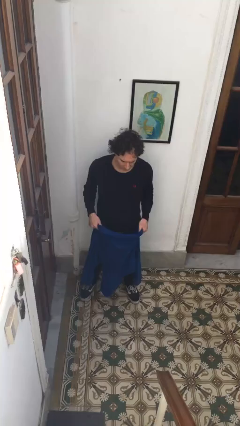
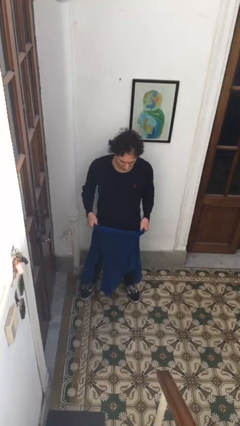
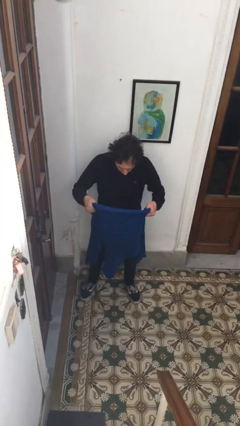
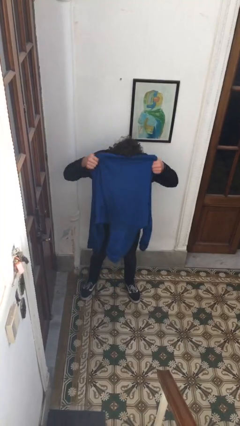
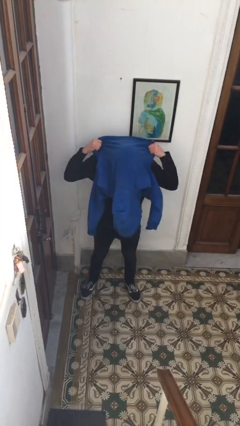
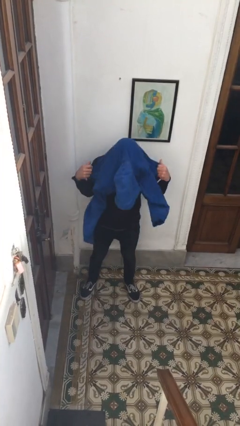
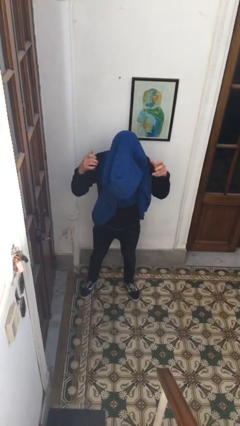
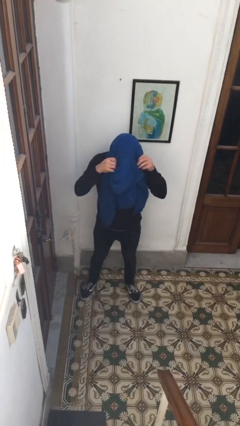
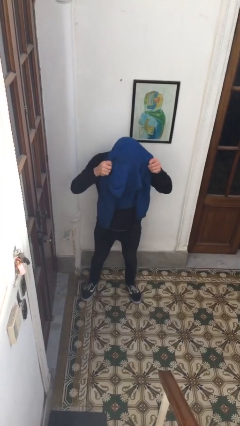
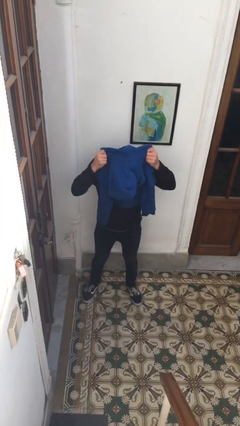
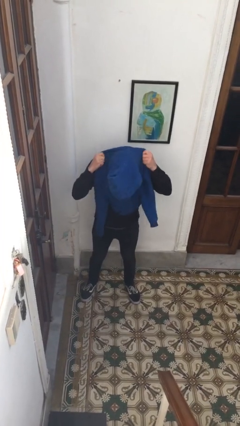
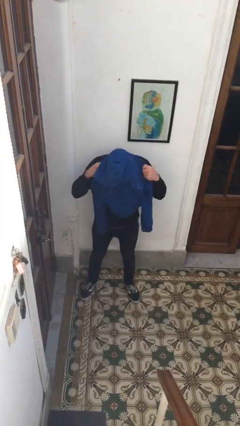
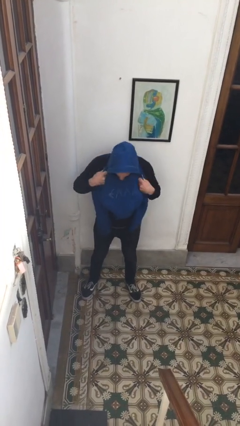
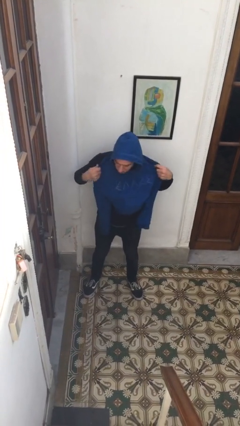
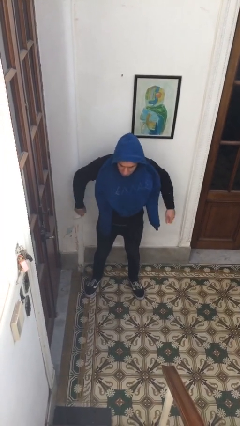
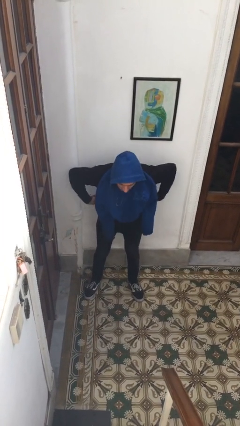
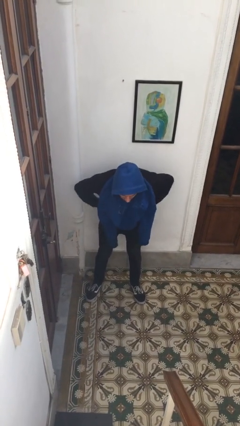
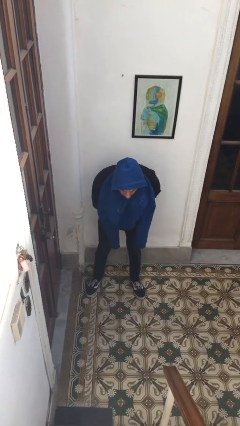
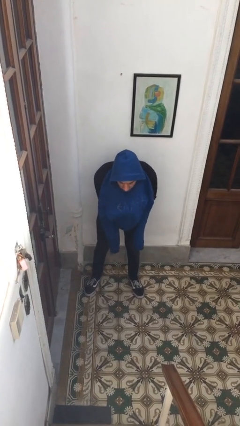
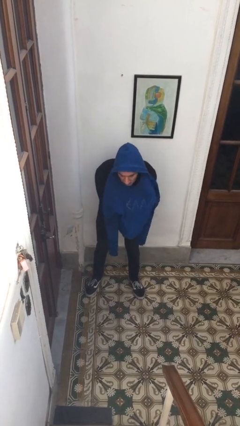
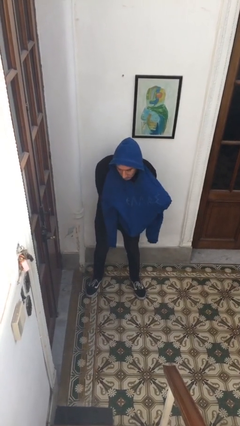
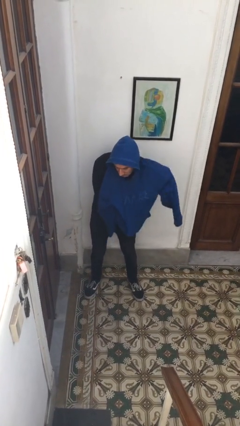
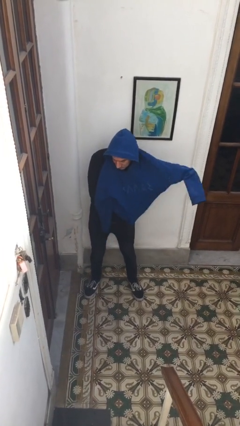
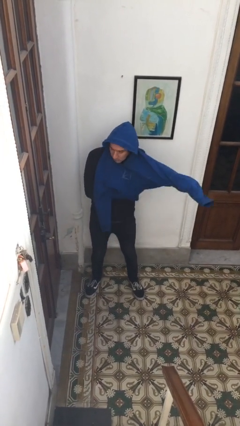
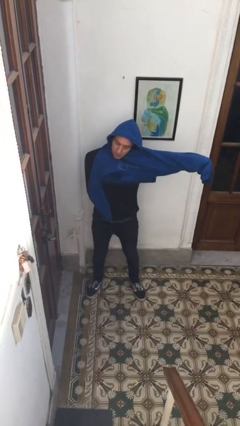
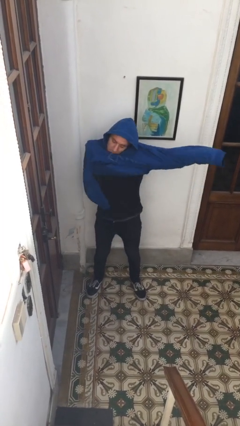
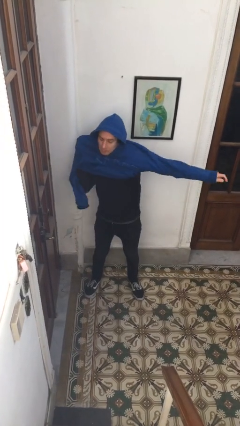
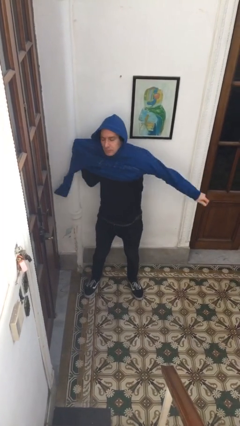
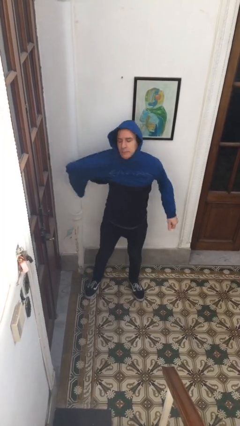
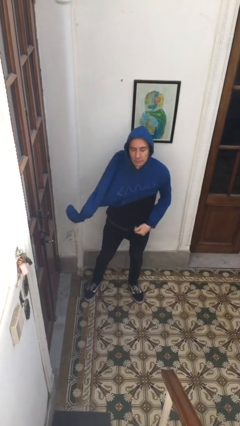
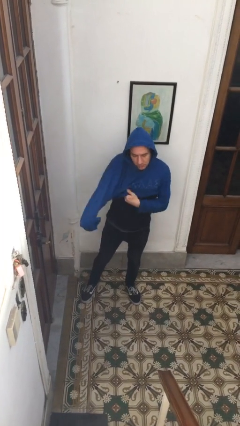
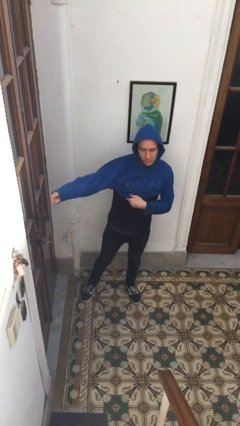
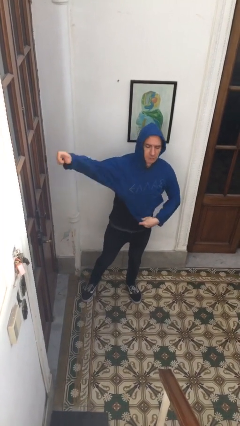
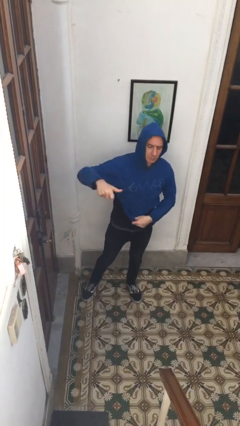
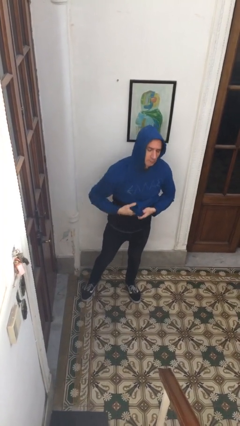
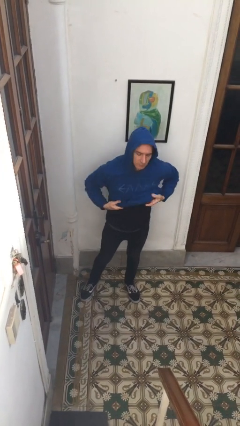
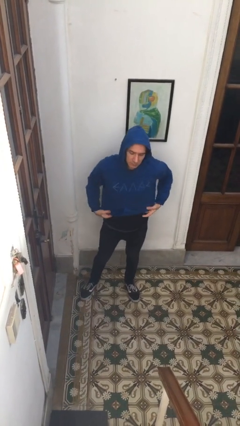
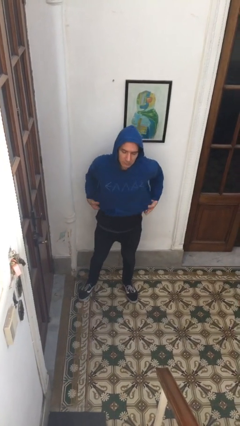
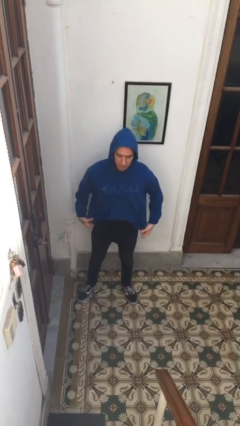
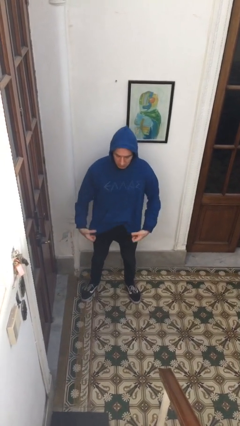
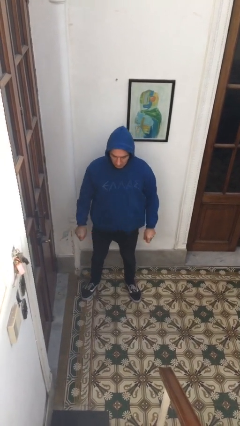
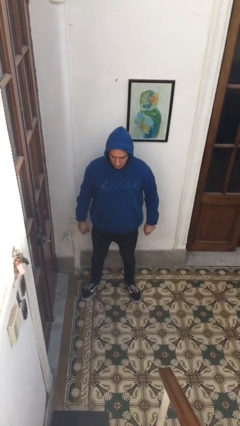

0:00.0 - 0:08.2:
person puts on hoodie

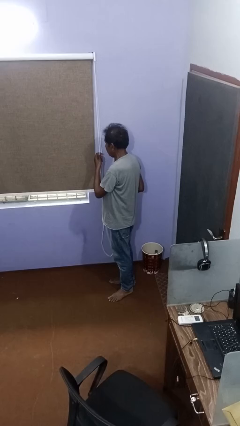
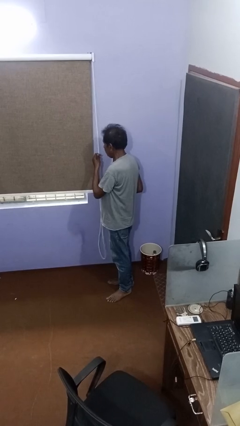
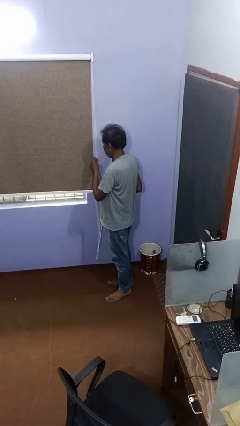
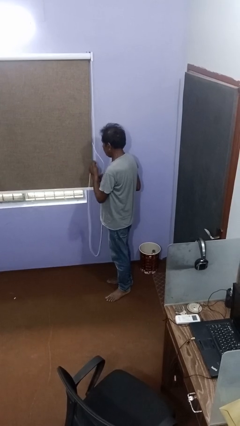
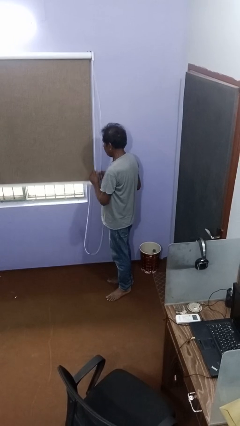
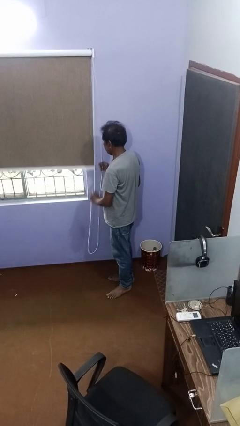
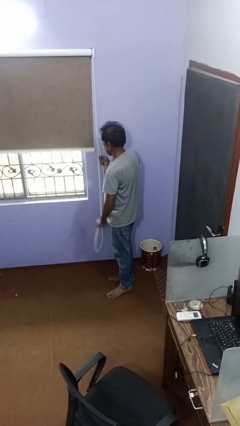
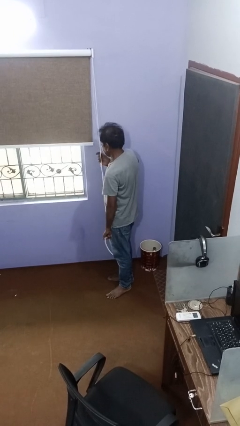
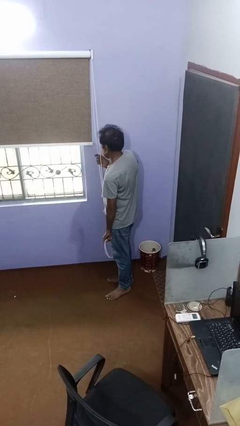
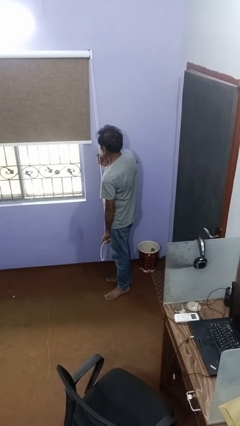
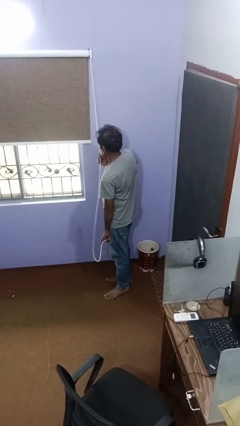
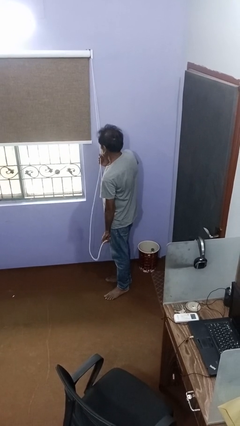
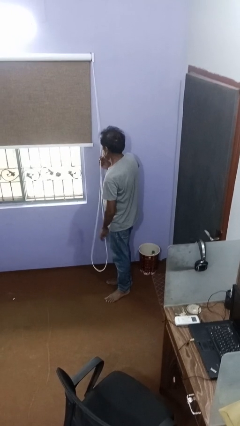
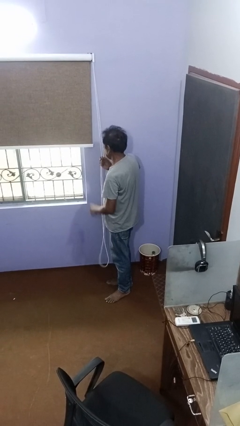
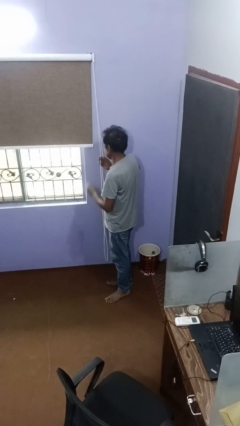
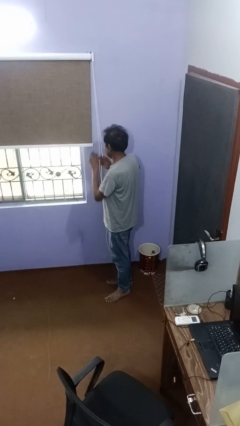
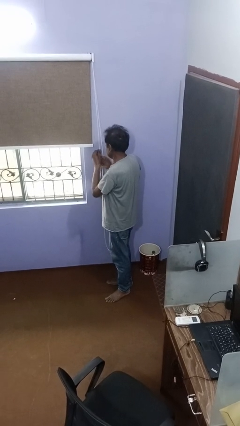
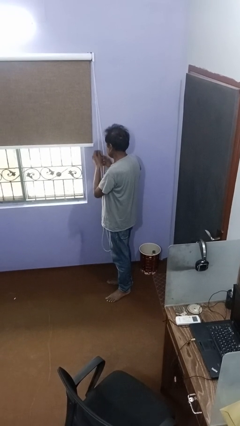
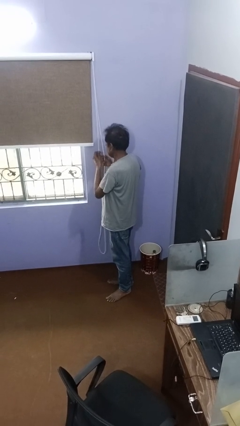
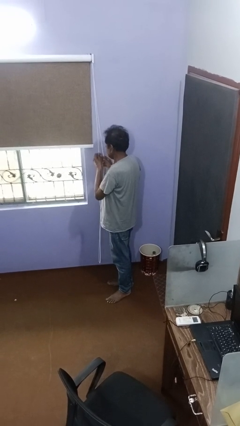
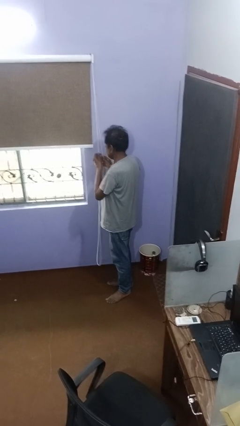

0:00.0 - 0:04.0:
person opens curtains

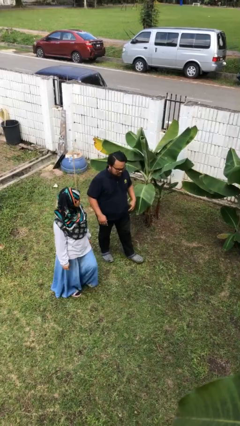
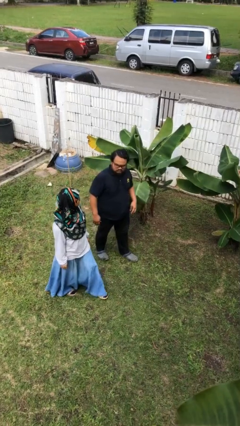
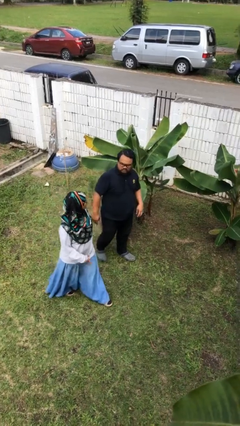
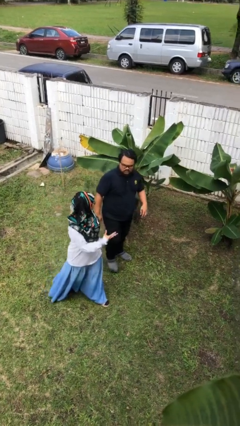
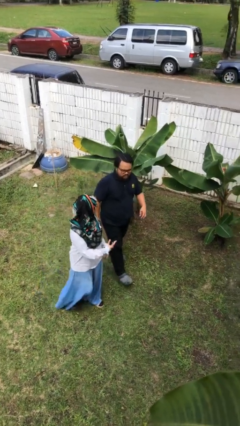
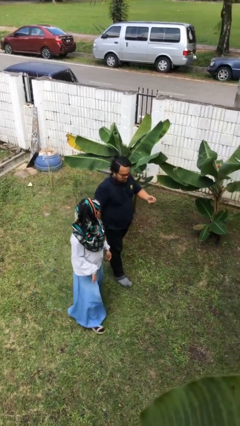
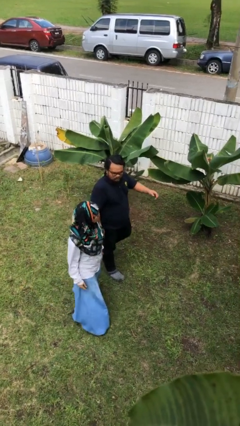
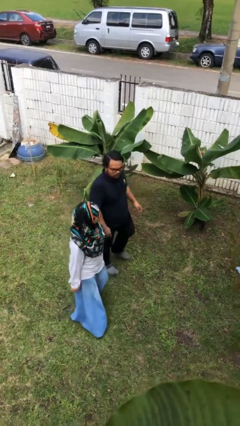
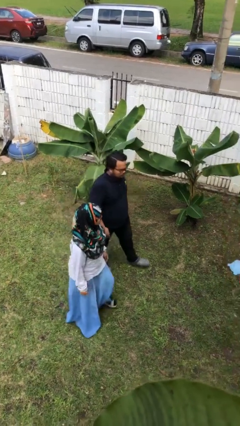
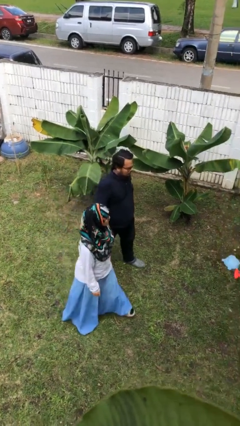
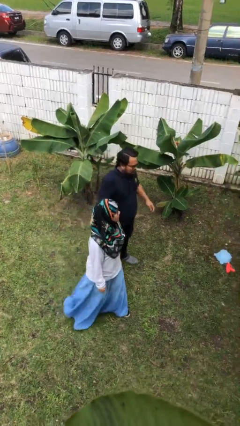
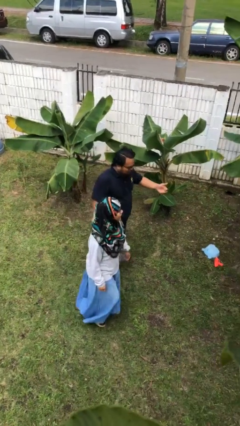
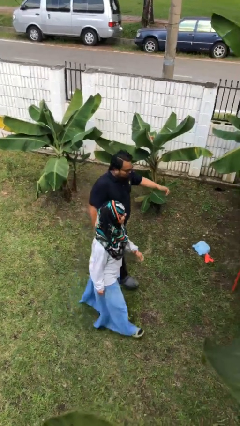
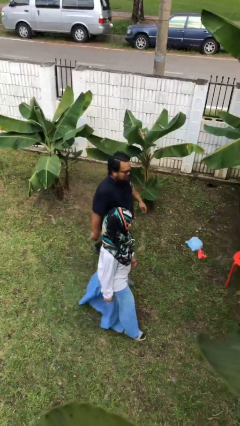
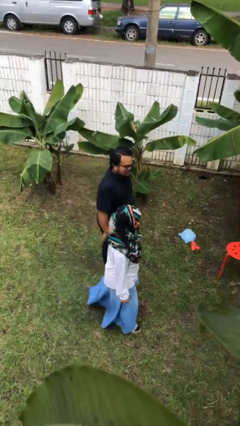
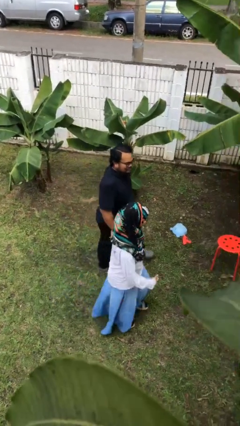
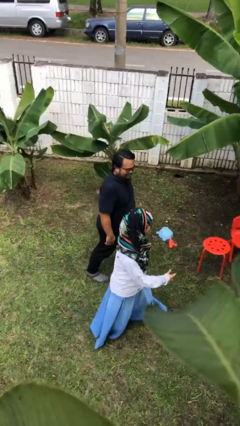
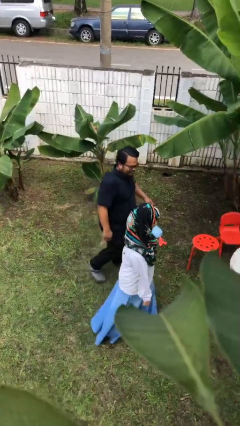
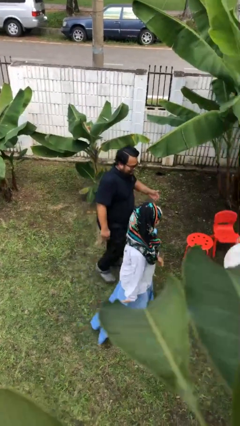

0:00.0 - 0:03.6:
person talks to person

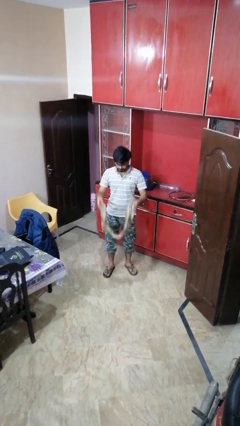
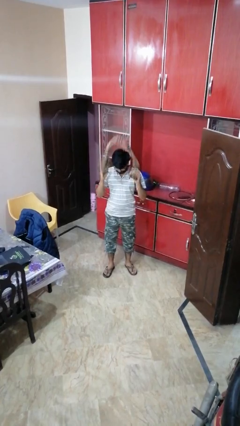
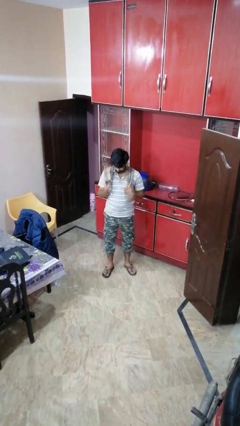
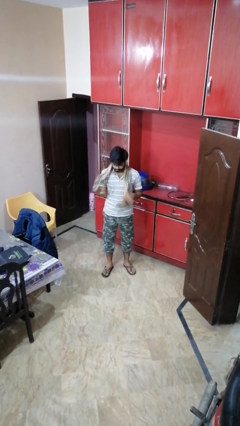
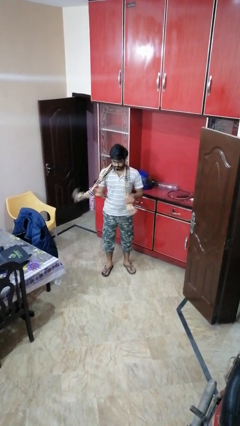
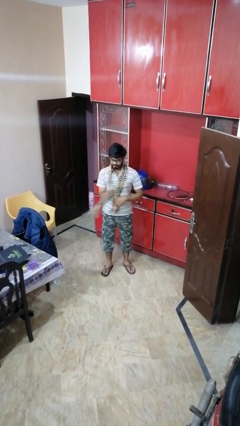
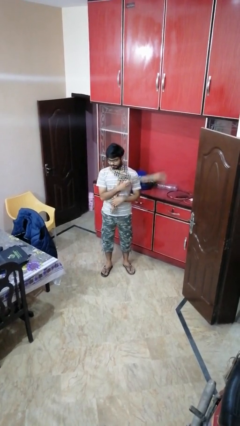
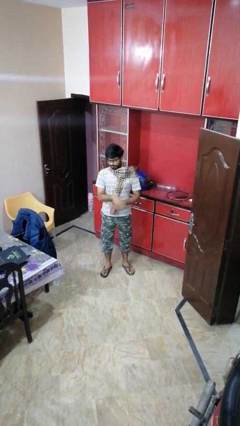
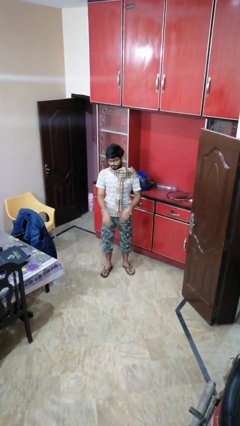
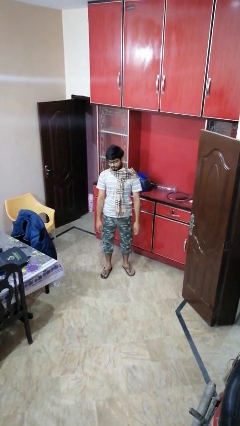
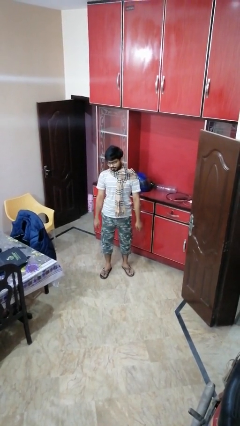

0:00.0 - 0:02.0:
person puts on scarf
